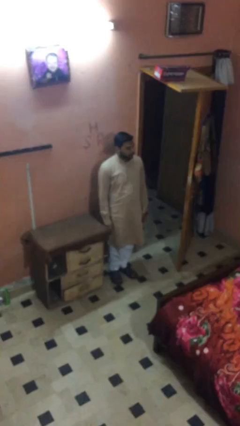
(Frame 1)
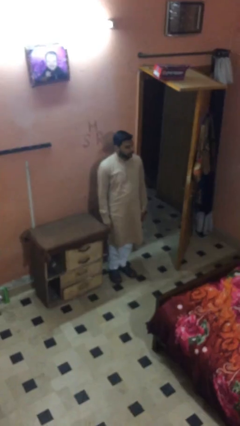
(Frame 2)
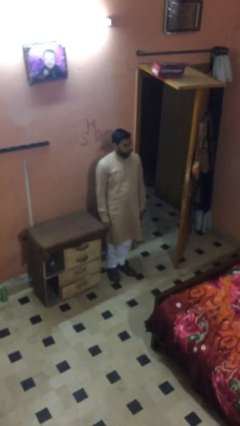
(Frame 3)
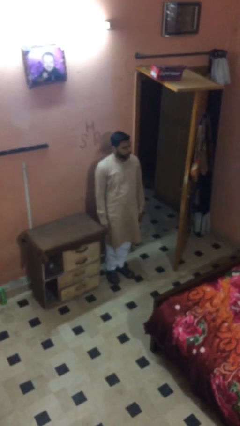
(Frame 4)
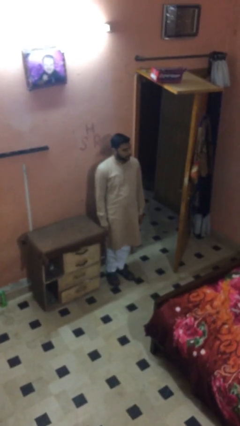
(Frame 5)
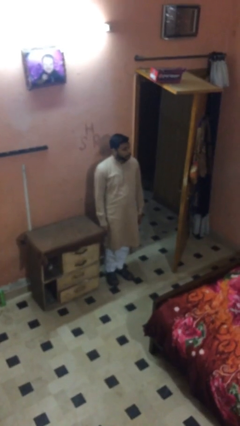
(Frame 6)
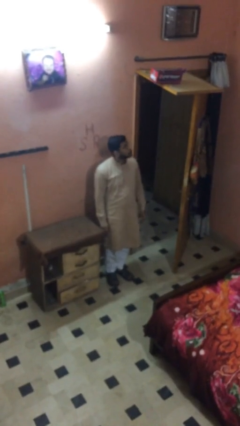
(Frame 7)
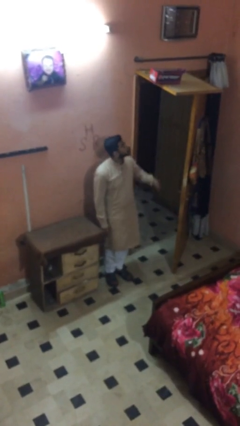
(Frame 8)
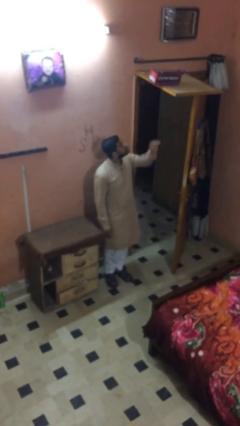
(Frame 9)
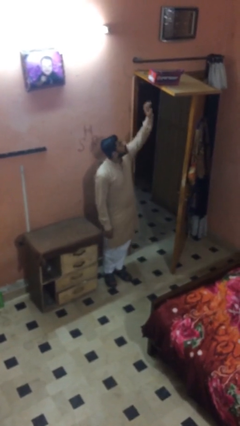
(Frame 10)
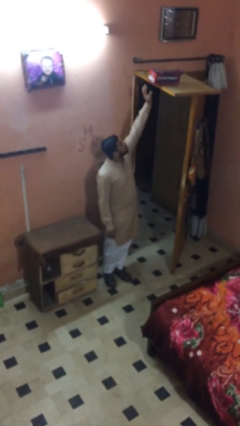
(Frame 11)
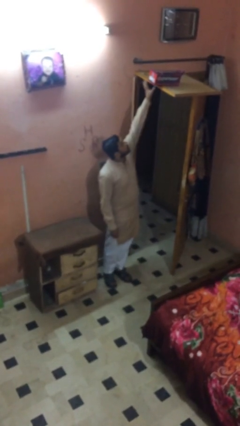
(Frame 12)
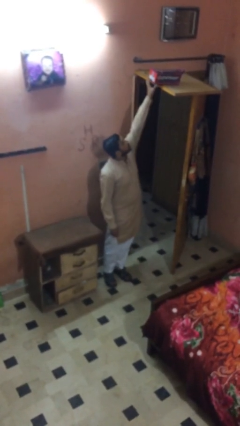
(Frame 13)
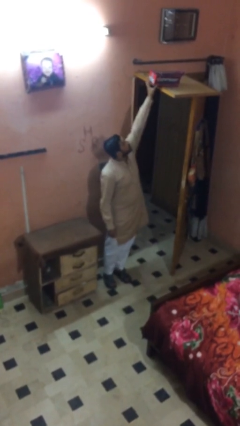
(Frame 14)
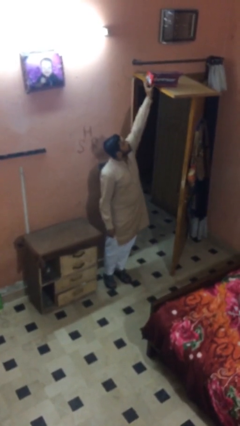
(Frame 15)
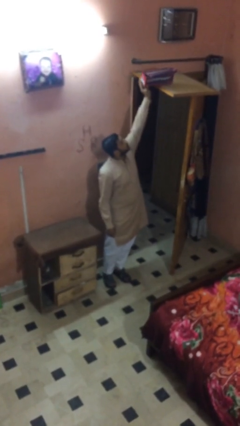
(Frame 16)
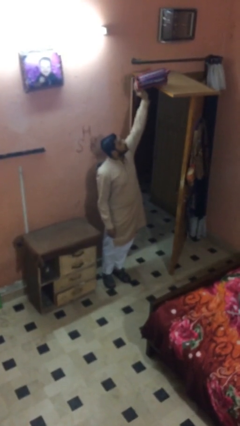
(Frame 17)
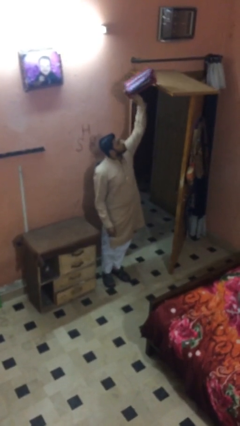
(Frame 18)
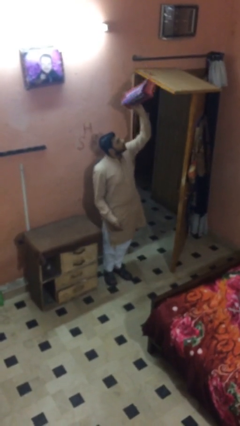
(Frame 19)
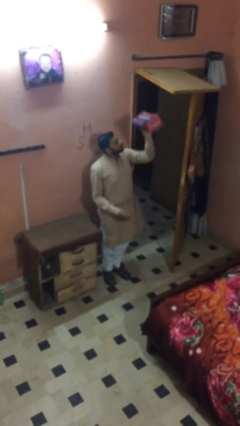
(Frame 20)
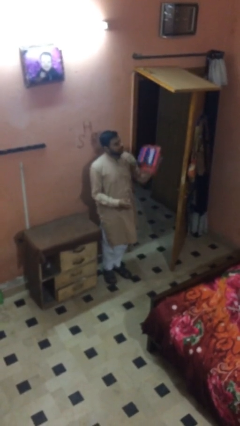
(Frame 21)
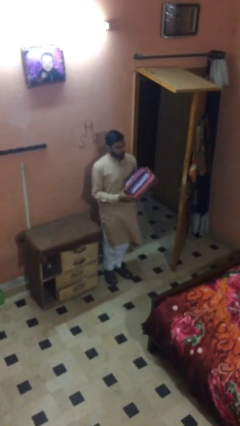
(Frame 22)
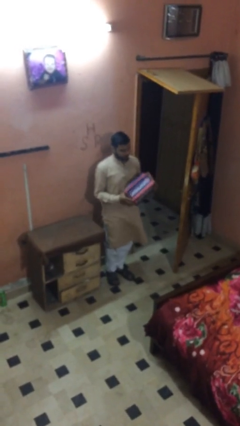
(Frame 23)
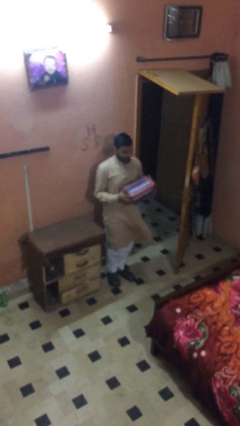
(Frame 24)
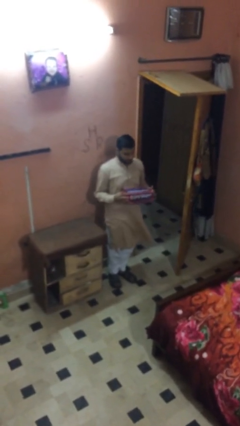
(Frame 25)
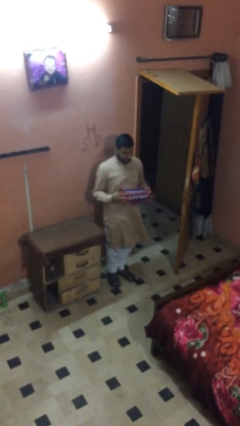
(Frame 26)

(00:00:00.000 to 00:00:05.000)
person picks up object from shelf

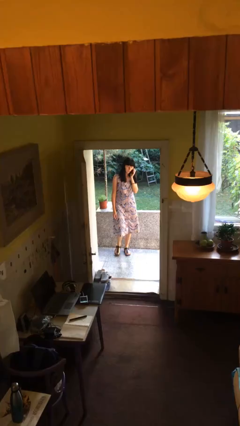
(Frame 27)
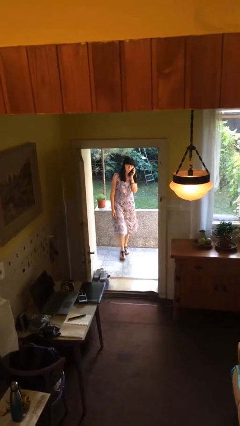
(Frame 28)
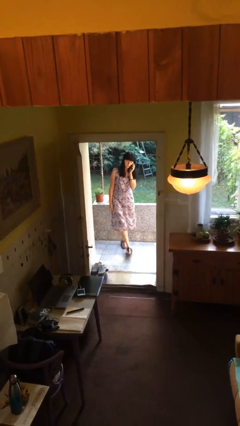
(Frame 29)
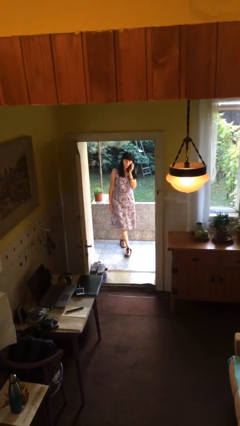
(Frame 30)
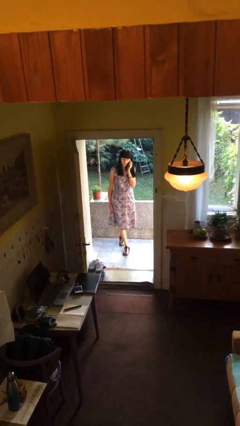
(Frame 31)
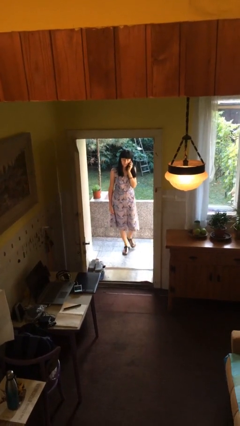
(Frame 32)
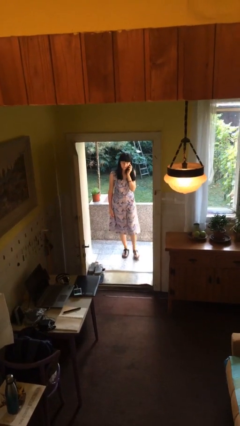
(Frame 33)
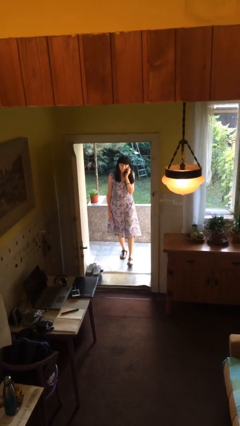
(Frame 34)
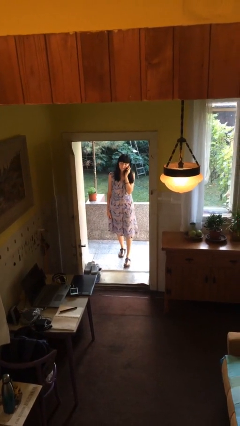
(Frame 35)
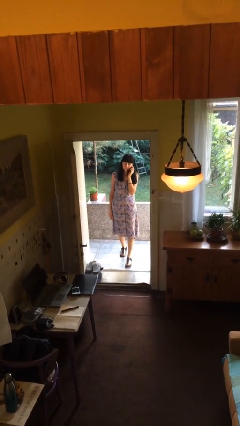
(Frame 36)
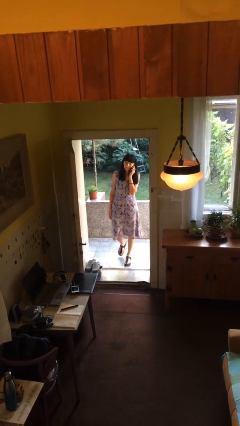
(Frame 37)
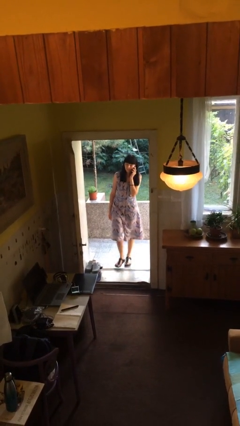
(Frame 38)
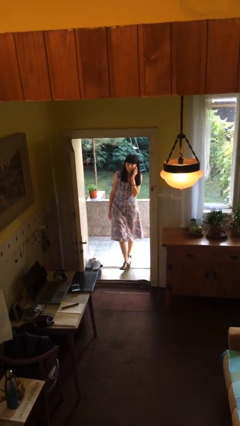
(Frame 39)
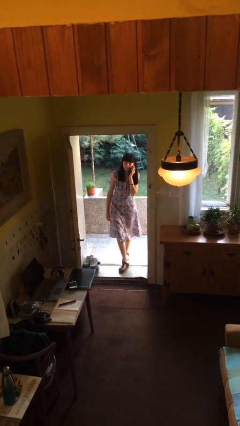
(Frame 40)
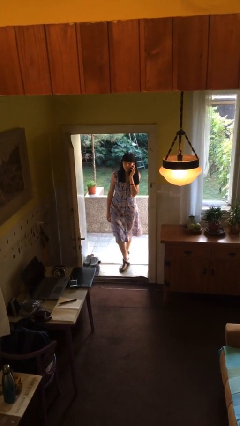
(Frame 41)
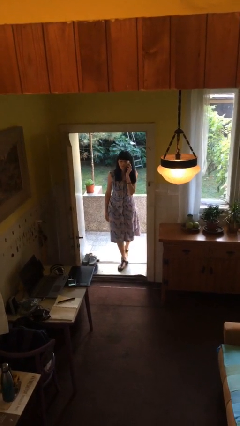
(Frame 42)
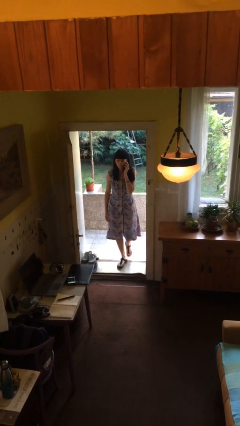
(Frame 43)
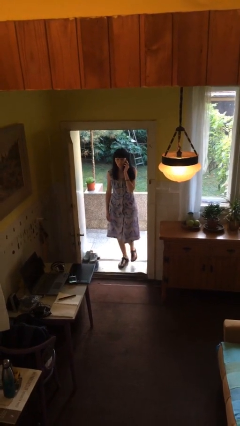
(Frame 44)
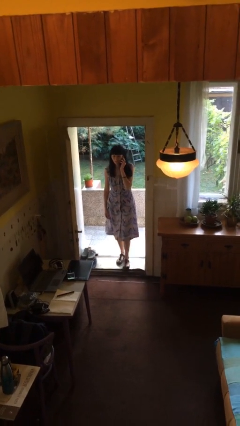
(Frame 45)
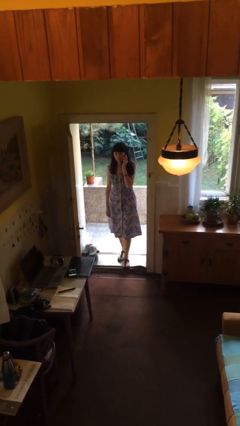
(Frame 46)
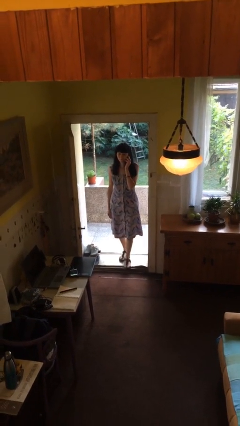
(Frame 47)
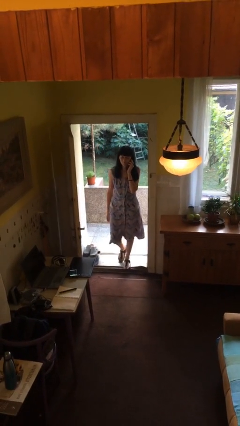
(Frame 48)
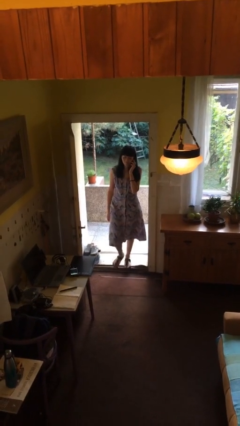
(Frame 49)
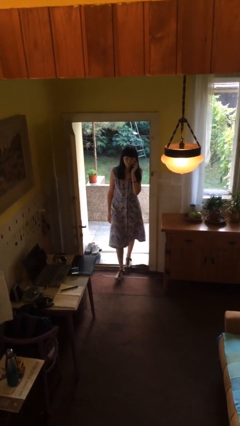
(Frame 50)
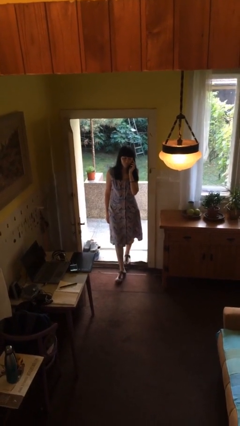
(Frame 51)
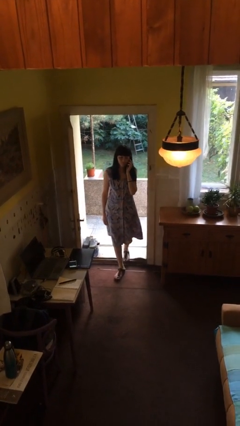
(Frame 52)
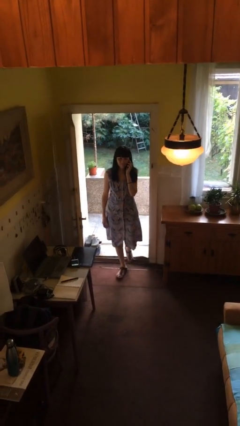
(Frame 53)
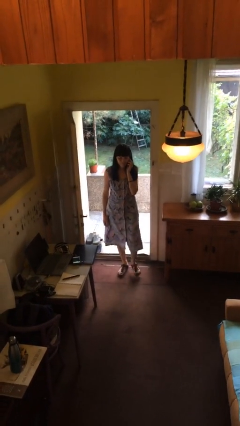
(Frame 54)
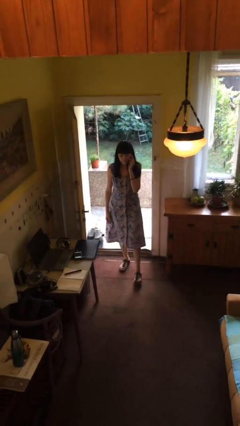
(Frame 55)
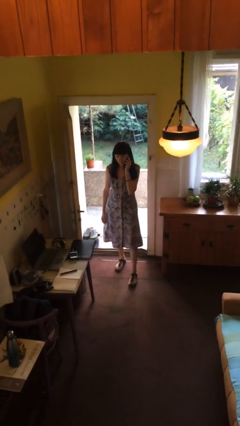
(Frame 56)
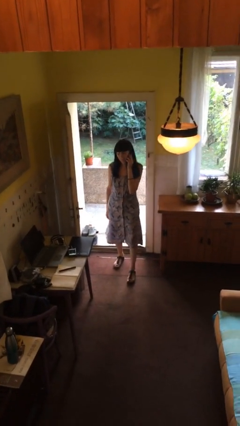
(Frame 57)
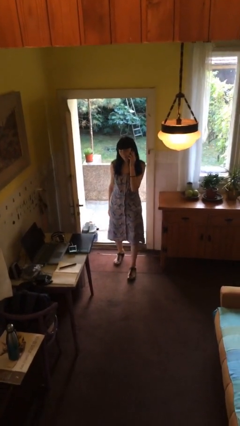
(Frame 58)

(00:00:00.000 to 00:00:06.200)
person enters scene through structure

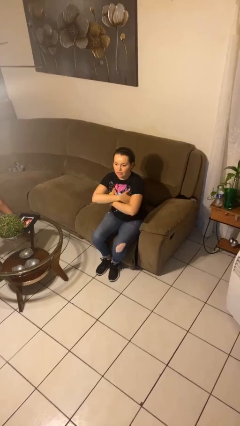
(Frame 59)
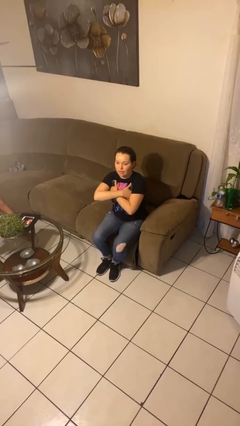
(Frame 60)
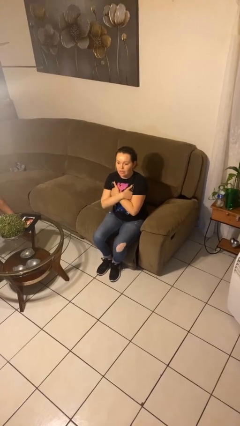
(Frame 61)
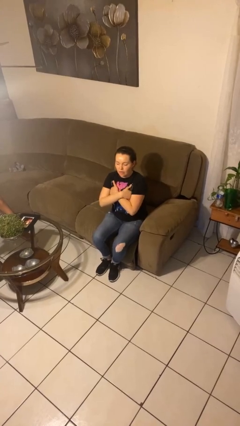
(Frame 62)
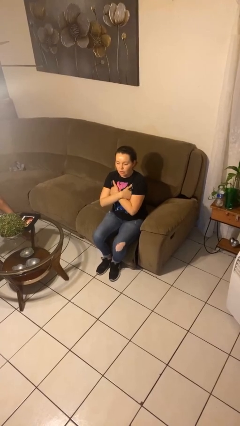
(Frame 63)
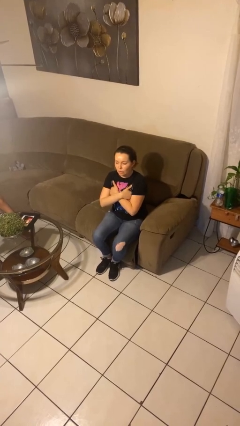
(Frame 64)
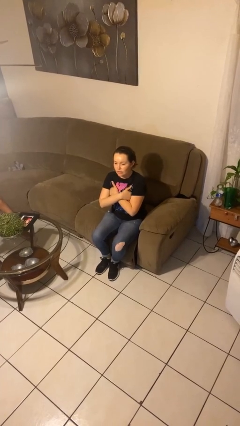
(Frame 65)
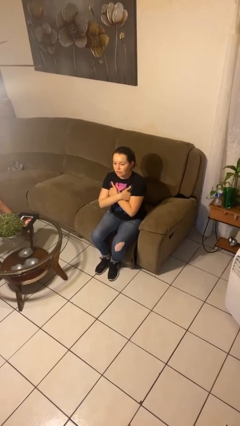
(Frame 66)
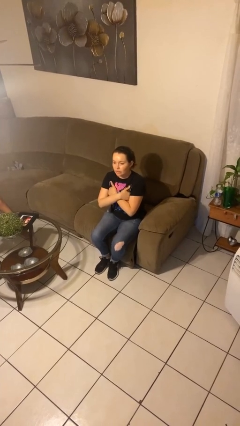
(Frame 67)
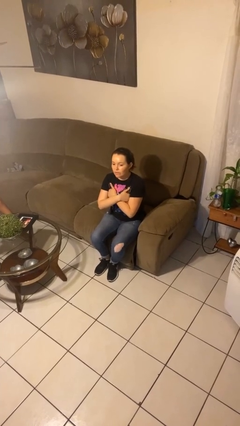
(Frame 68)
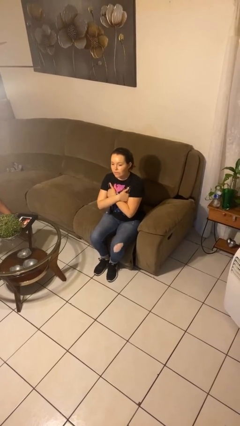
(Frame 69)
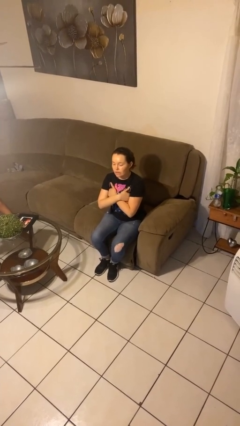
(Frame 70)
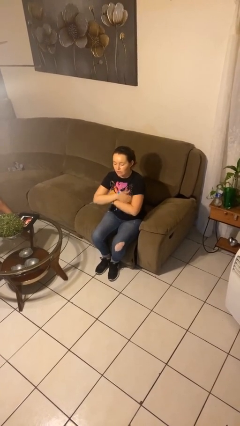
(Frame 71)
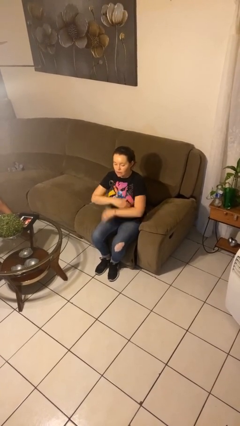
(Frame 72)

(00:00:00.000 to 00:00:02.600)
person gestures arms x

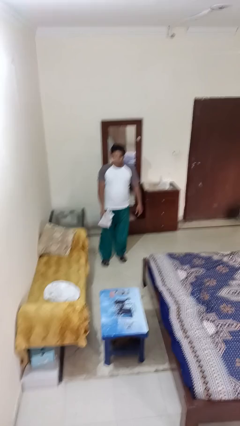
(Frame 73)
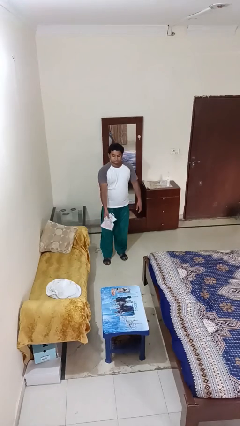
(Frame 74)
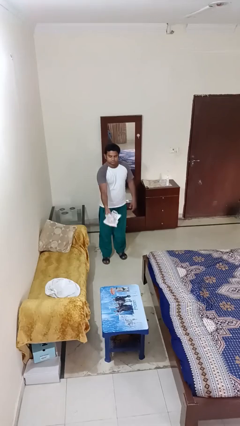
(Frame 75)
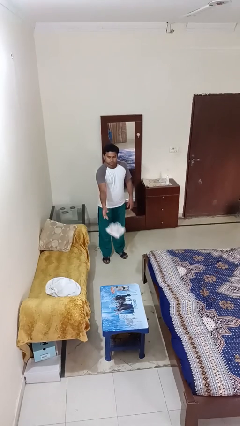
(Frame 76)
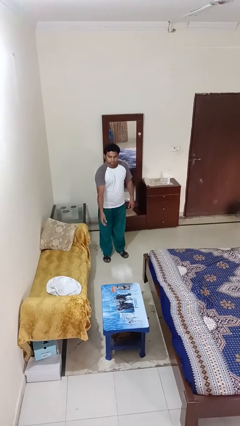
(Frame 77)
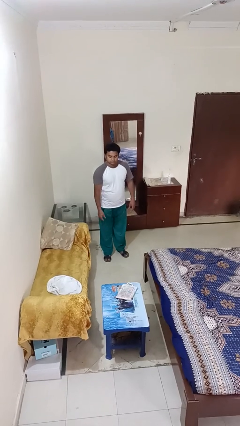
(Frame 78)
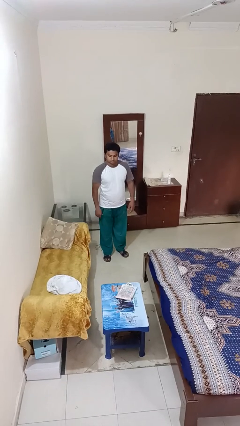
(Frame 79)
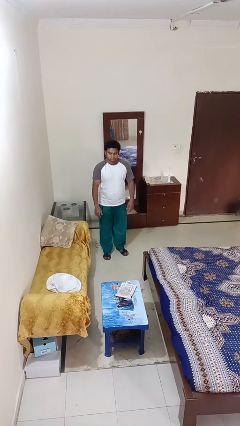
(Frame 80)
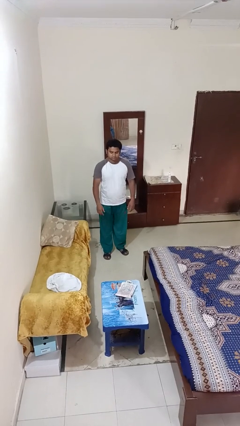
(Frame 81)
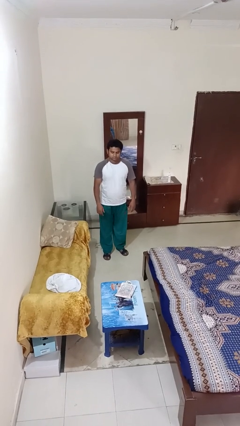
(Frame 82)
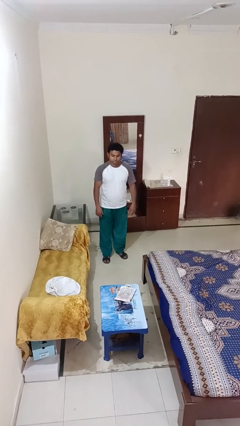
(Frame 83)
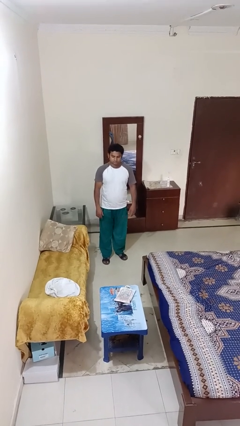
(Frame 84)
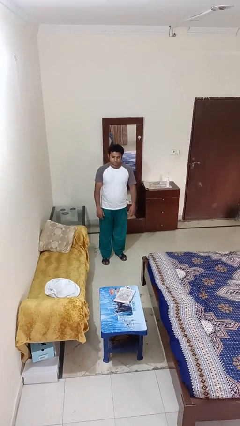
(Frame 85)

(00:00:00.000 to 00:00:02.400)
person throws object on table

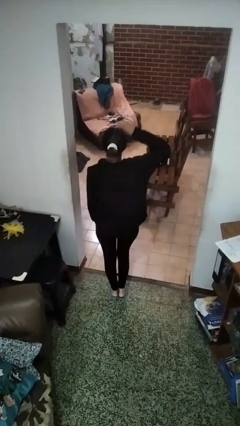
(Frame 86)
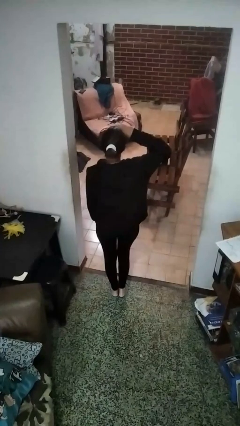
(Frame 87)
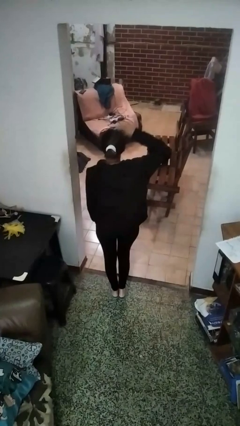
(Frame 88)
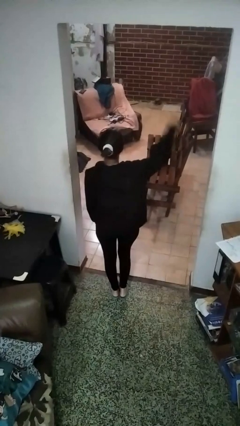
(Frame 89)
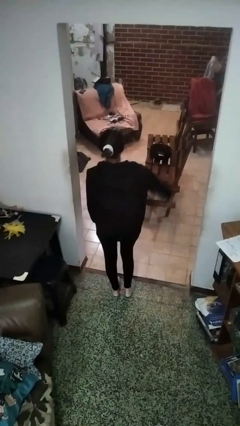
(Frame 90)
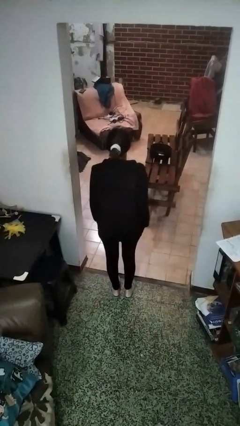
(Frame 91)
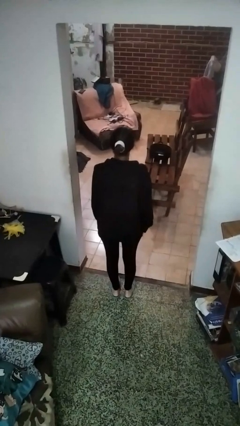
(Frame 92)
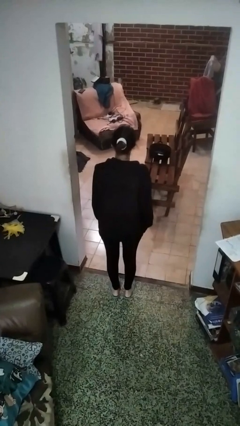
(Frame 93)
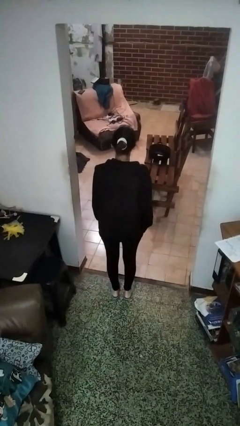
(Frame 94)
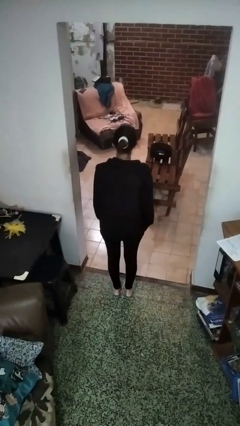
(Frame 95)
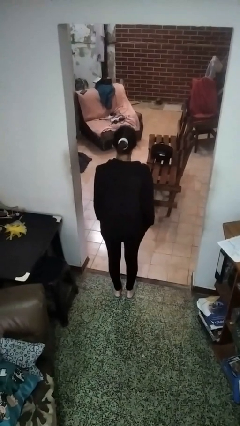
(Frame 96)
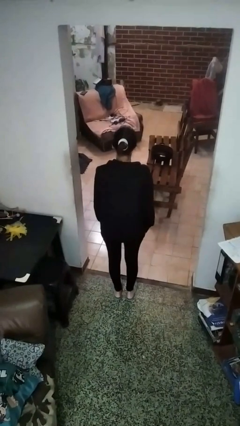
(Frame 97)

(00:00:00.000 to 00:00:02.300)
person salutes
